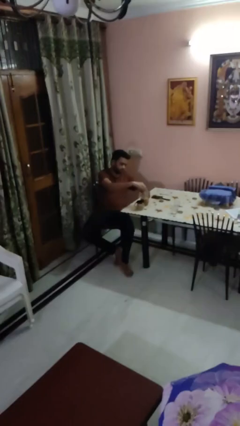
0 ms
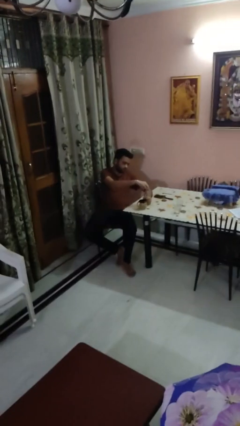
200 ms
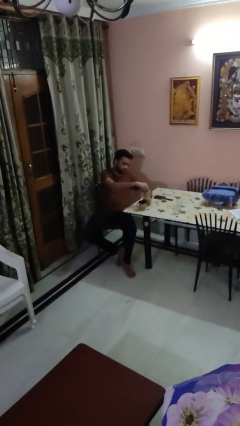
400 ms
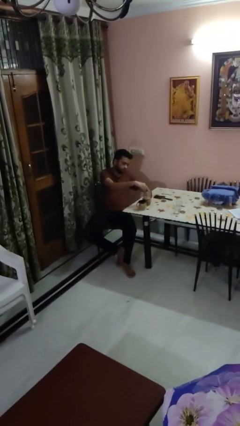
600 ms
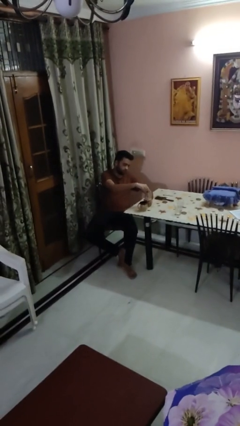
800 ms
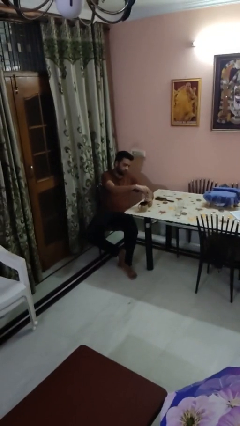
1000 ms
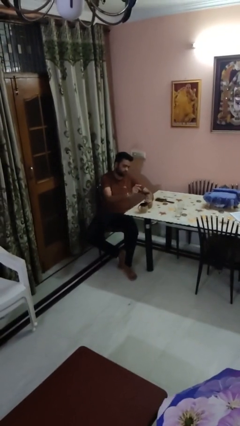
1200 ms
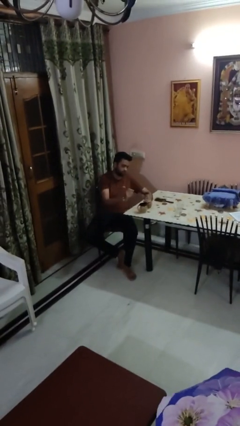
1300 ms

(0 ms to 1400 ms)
person screws lid to bottle

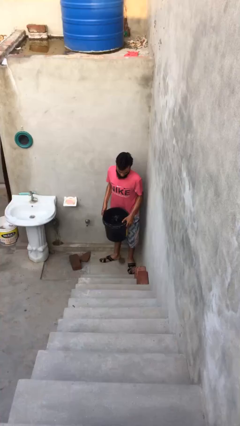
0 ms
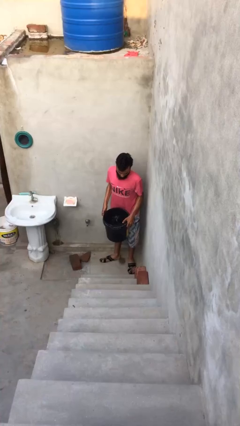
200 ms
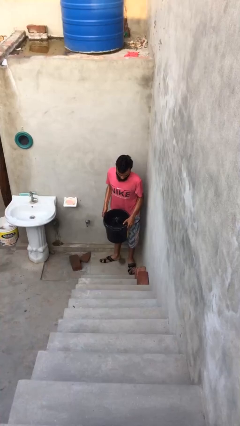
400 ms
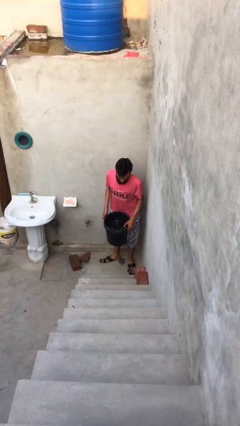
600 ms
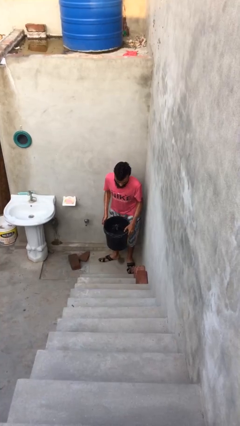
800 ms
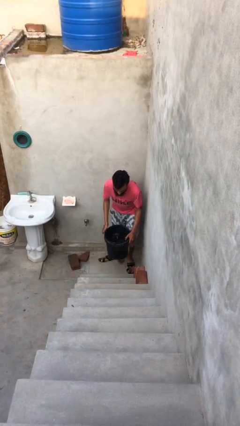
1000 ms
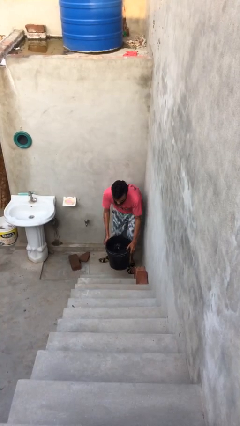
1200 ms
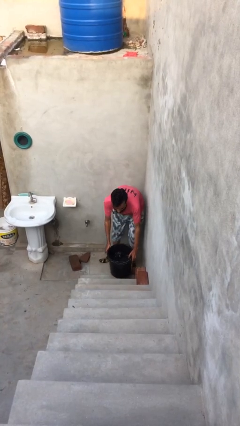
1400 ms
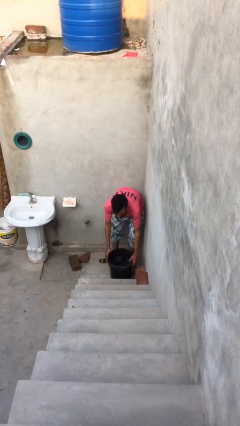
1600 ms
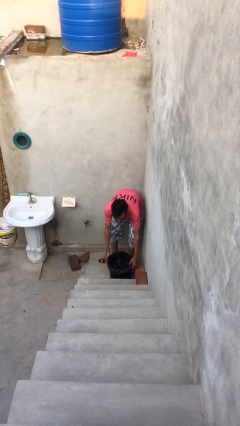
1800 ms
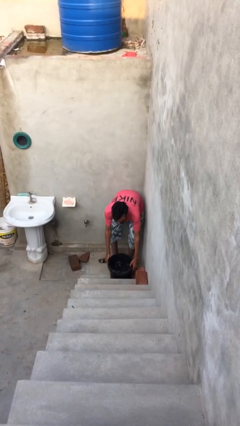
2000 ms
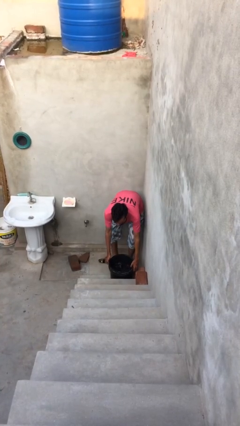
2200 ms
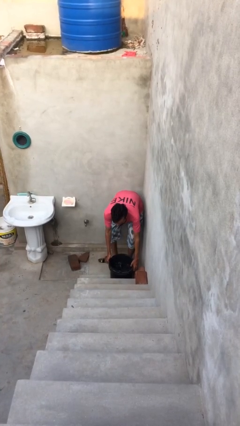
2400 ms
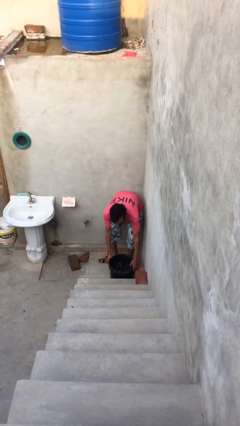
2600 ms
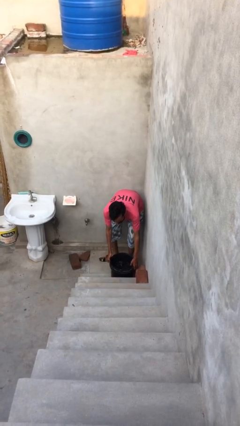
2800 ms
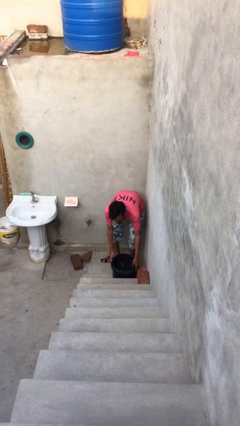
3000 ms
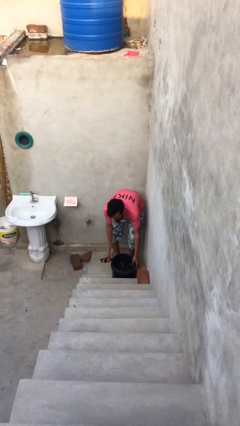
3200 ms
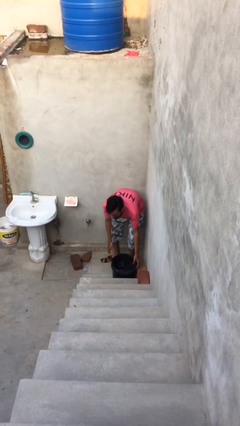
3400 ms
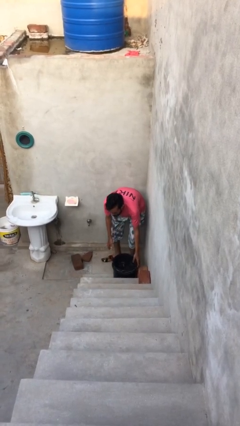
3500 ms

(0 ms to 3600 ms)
person puts down object on floor

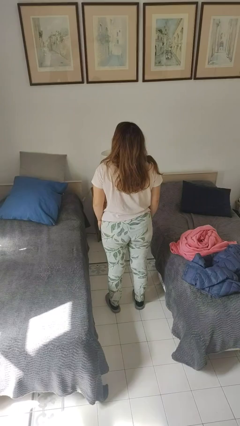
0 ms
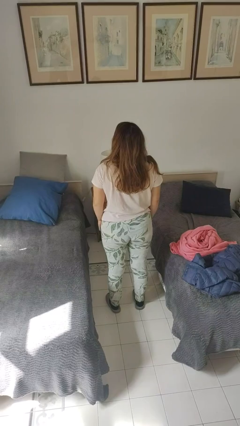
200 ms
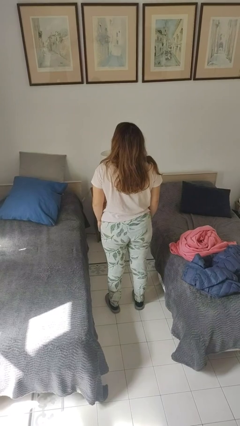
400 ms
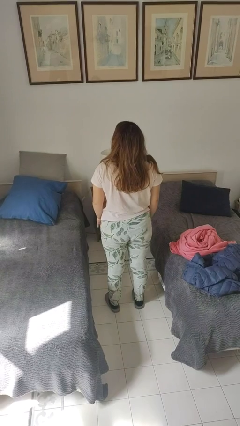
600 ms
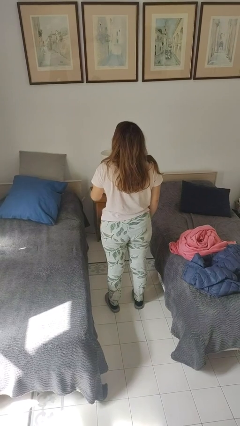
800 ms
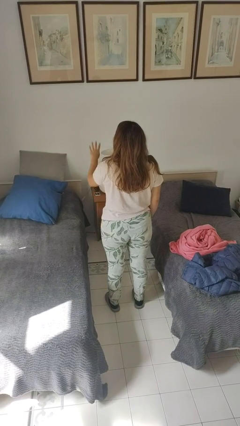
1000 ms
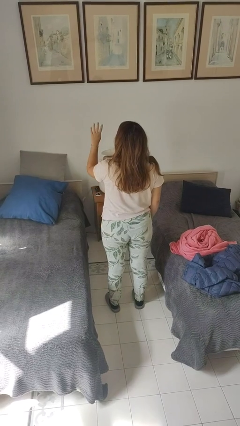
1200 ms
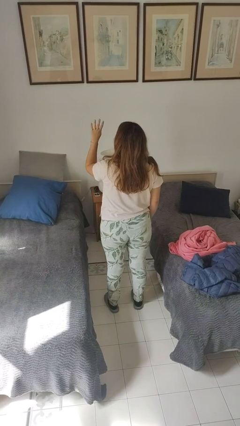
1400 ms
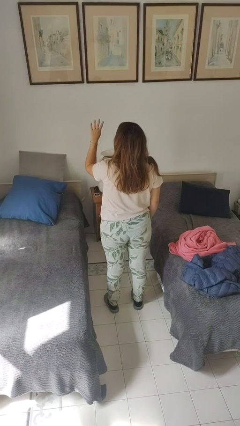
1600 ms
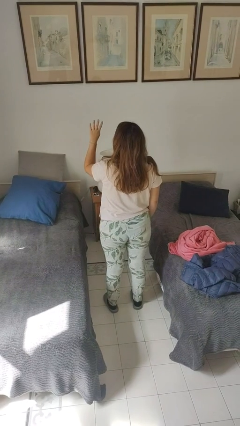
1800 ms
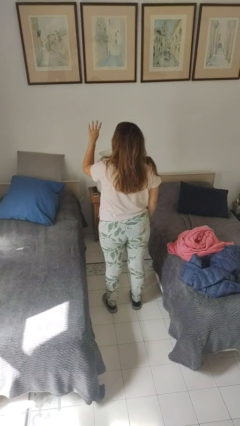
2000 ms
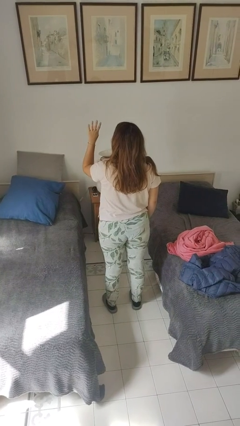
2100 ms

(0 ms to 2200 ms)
person gestures number four

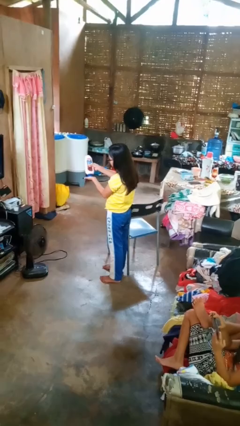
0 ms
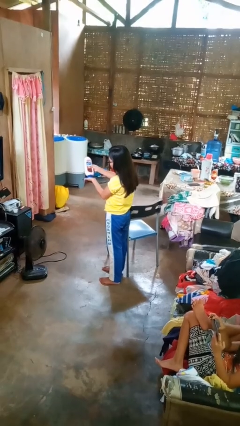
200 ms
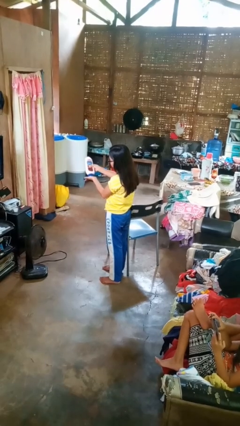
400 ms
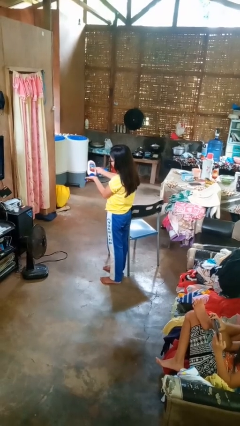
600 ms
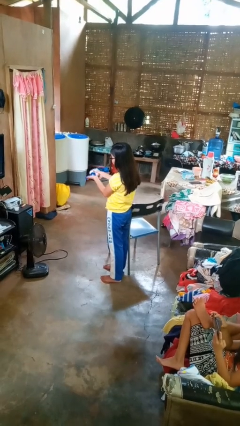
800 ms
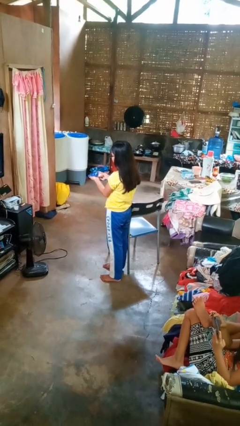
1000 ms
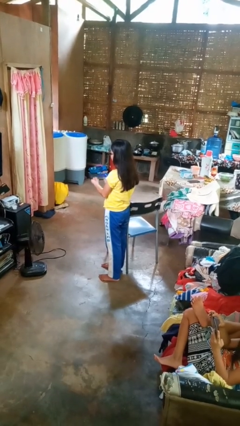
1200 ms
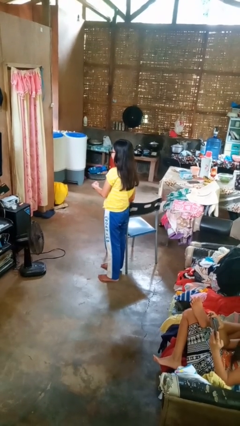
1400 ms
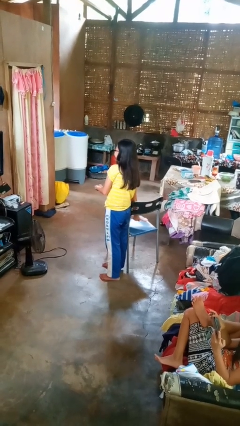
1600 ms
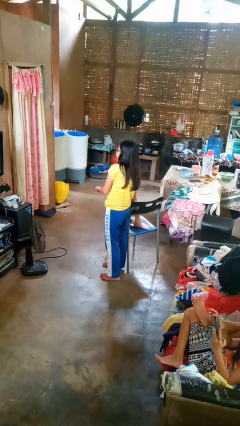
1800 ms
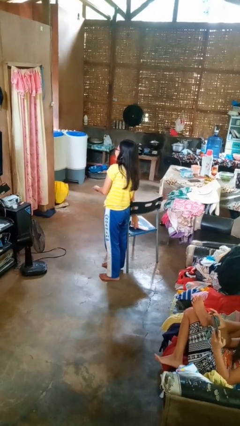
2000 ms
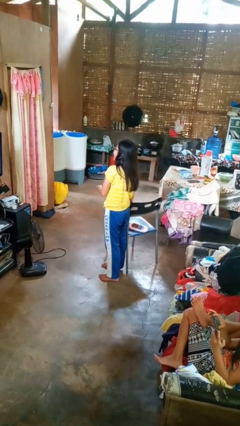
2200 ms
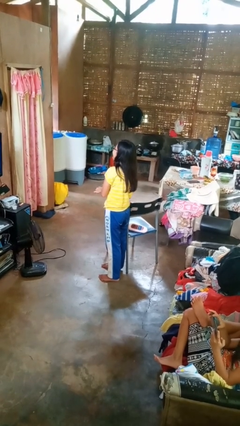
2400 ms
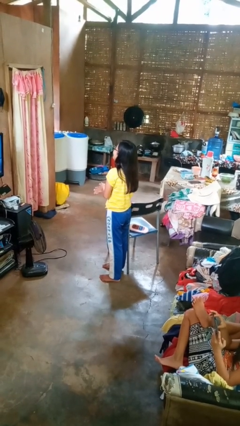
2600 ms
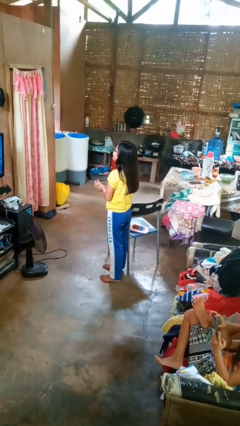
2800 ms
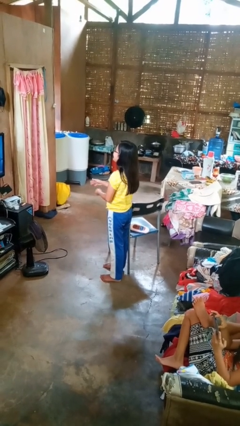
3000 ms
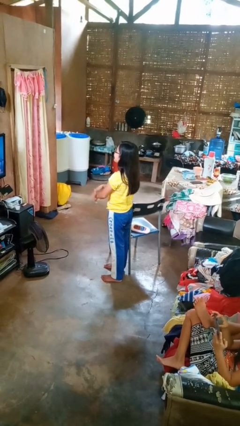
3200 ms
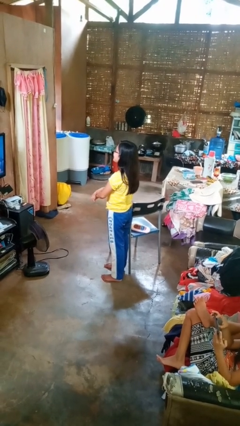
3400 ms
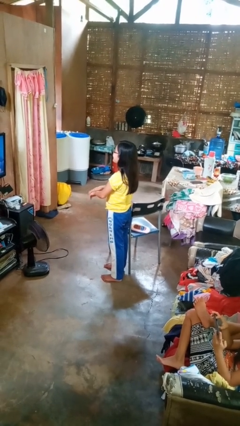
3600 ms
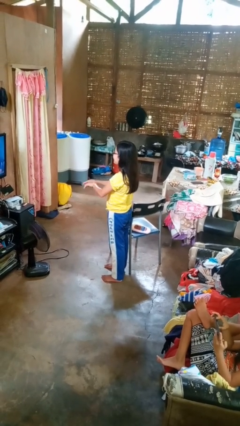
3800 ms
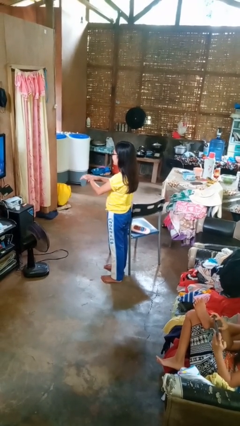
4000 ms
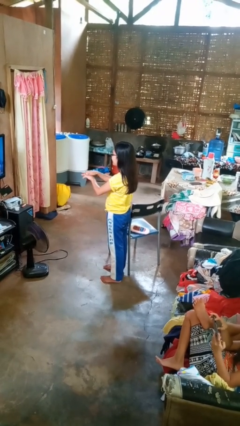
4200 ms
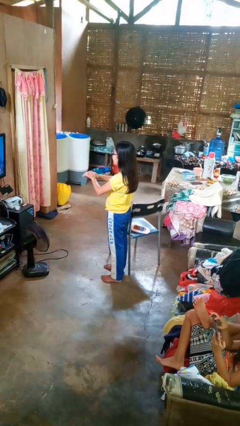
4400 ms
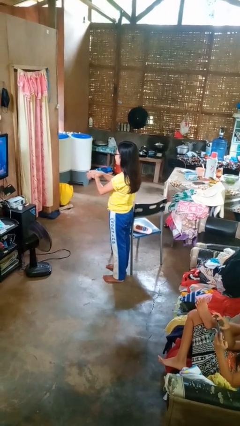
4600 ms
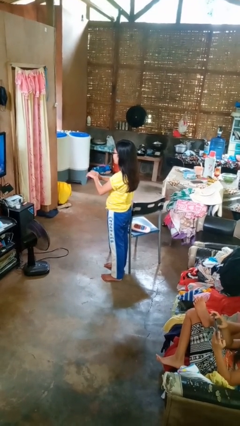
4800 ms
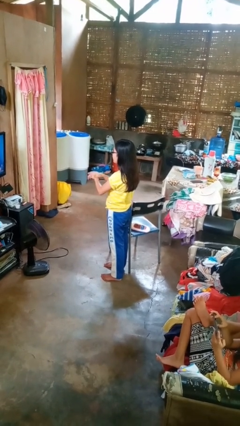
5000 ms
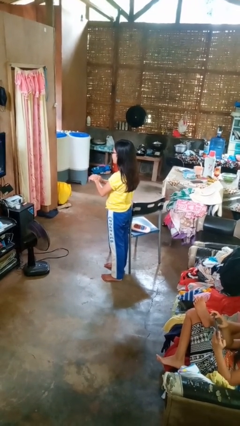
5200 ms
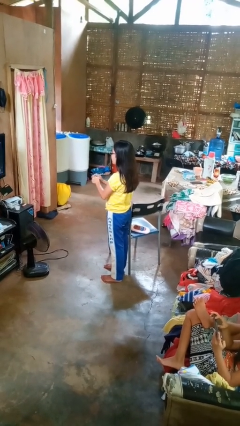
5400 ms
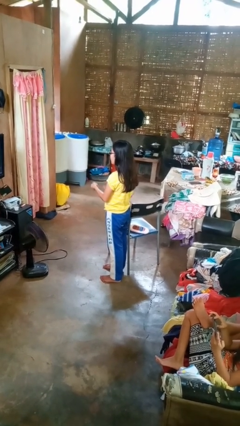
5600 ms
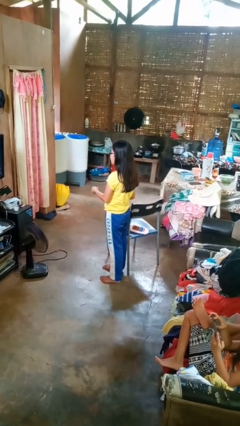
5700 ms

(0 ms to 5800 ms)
person applies sunscreen

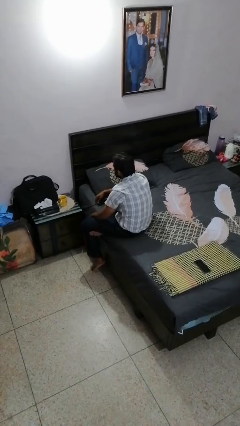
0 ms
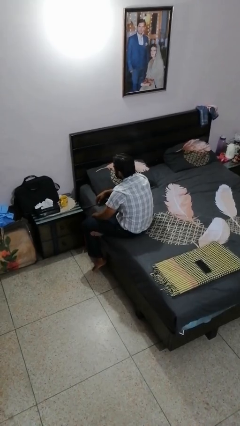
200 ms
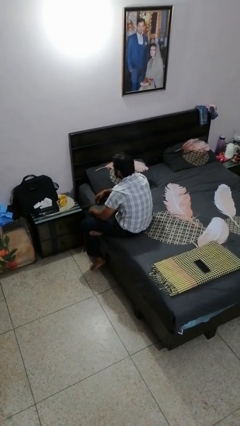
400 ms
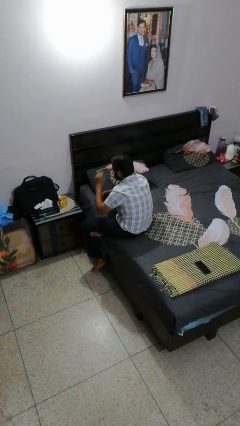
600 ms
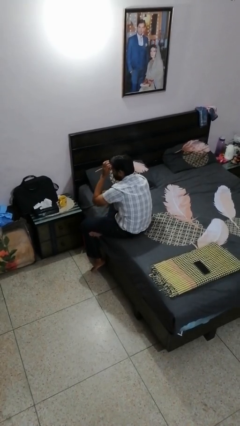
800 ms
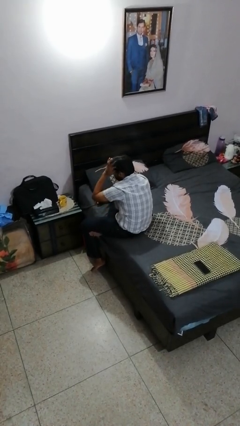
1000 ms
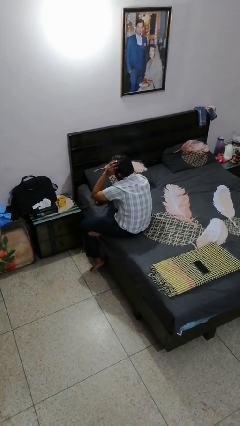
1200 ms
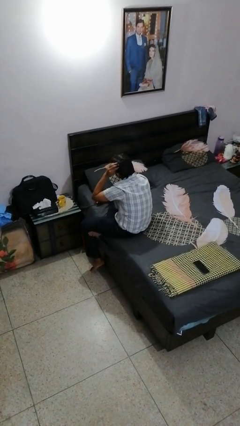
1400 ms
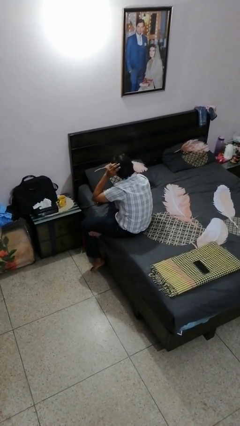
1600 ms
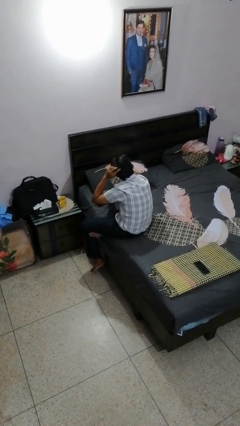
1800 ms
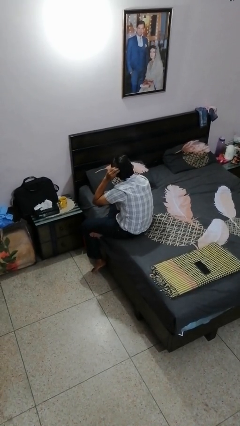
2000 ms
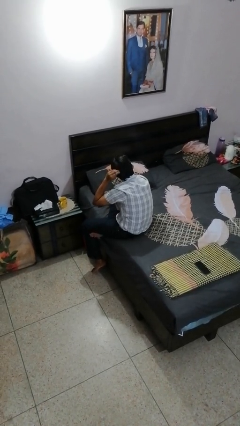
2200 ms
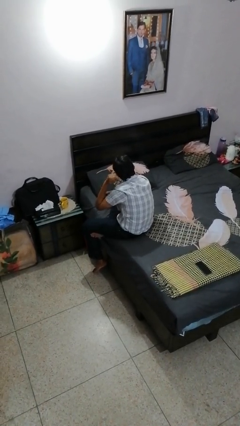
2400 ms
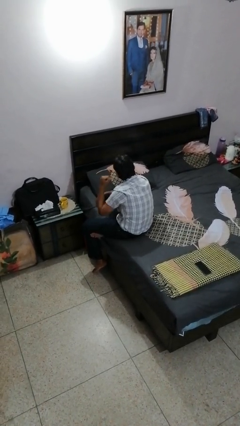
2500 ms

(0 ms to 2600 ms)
person strokes hair
